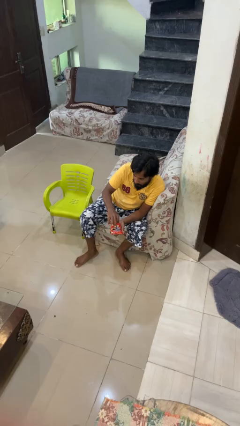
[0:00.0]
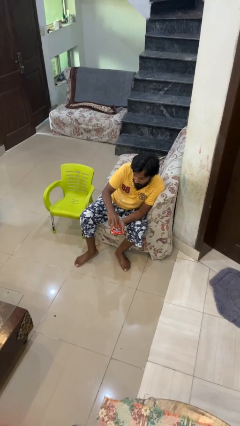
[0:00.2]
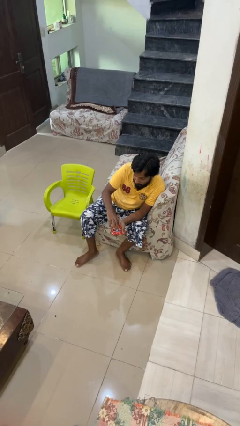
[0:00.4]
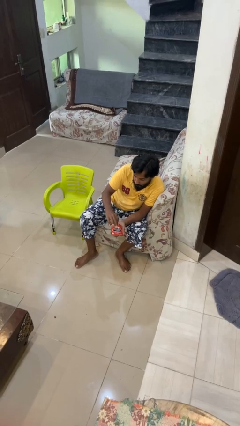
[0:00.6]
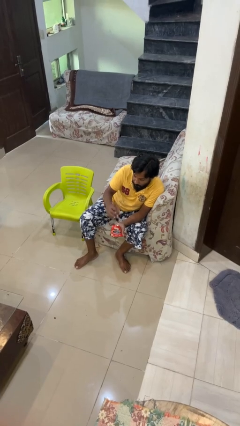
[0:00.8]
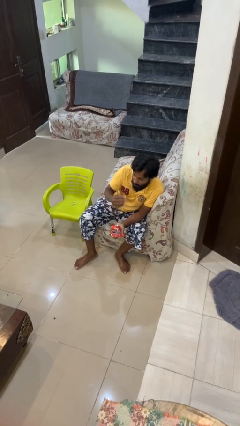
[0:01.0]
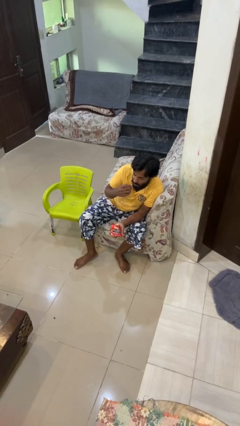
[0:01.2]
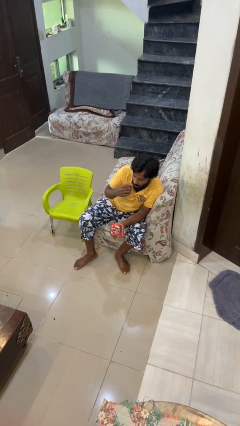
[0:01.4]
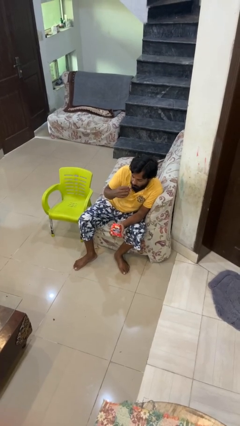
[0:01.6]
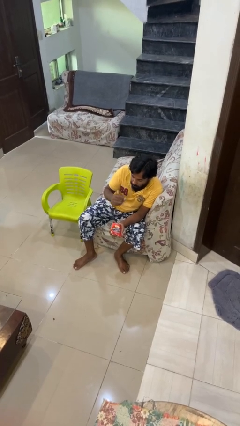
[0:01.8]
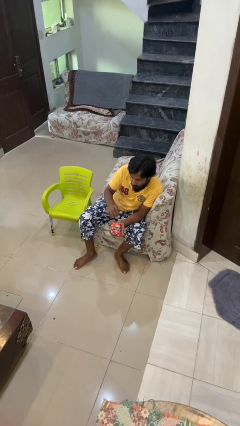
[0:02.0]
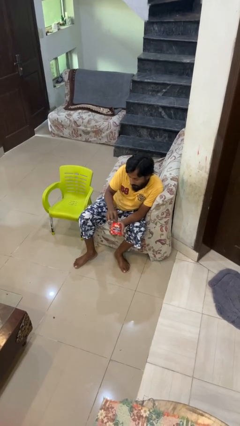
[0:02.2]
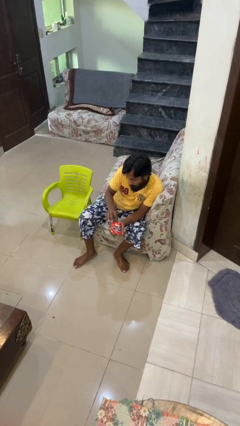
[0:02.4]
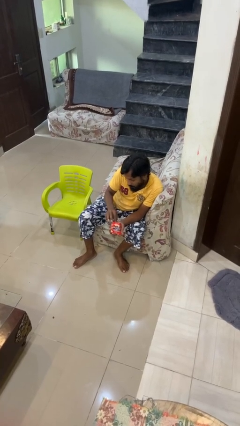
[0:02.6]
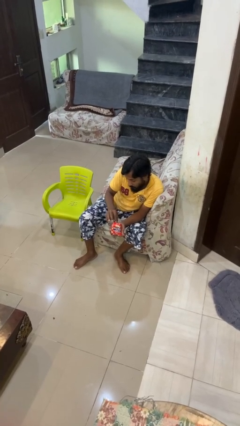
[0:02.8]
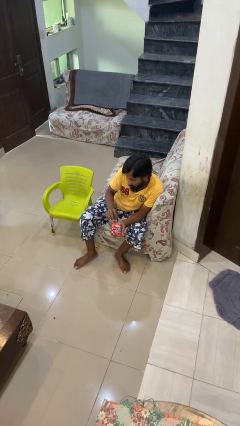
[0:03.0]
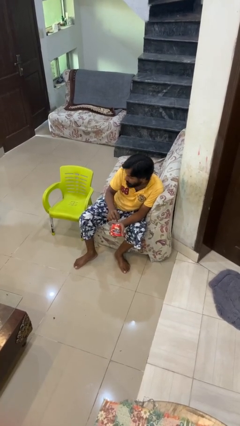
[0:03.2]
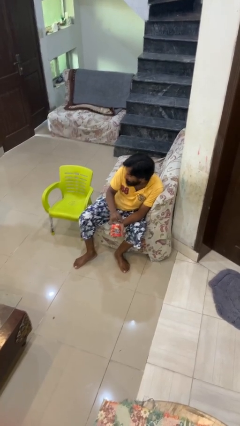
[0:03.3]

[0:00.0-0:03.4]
person eats snack from bag

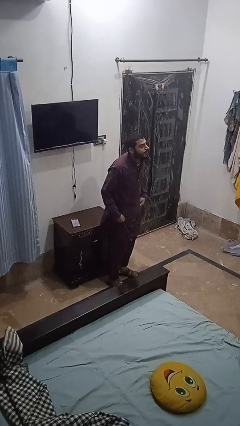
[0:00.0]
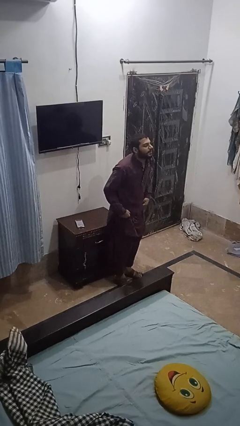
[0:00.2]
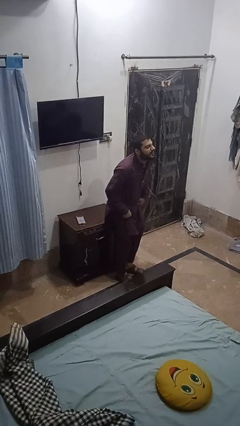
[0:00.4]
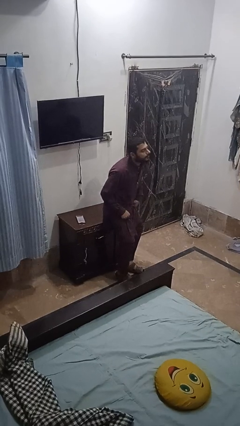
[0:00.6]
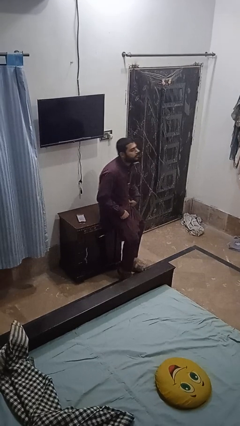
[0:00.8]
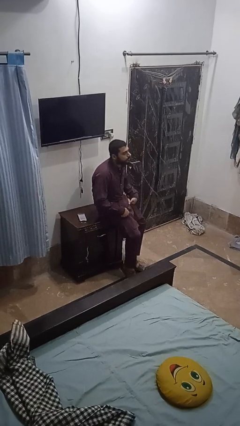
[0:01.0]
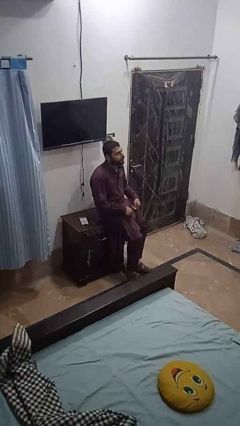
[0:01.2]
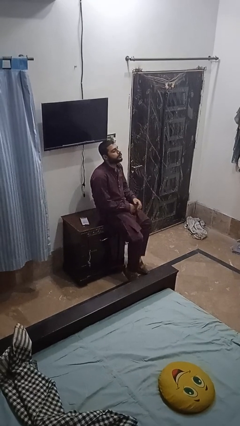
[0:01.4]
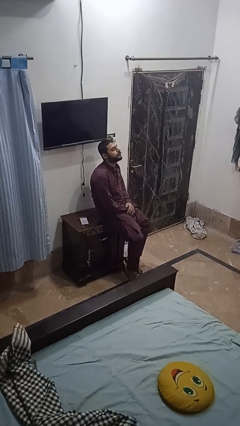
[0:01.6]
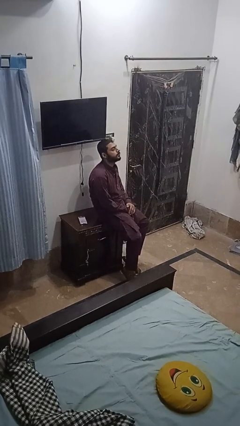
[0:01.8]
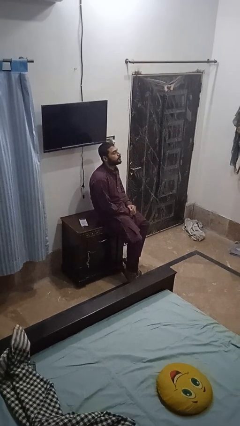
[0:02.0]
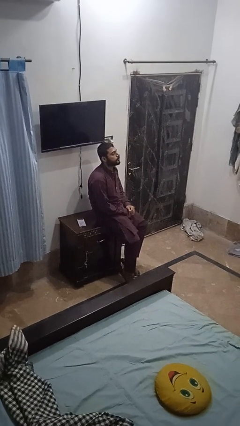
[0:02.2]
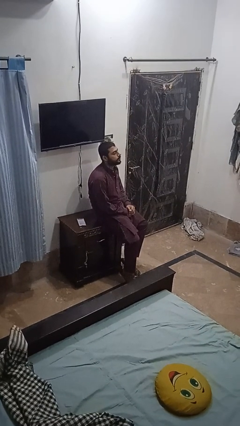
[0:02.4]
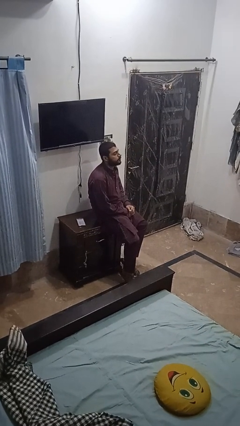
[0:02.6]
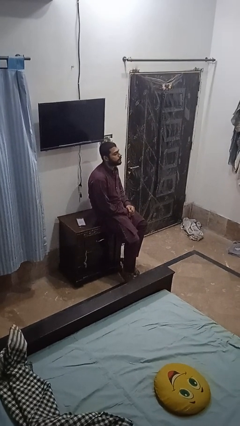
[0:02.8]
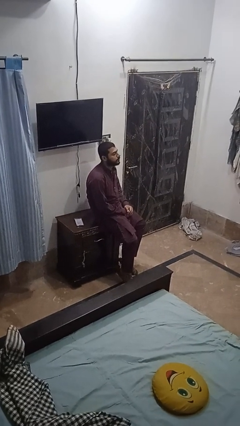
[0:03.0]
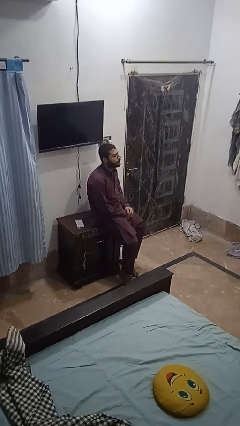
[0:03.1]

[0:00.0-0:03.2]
person sits down

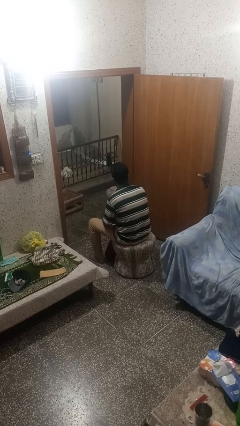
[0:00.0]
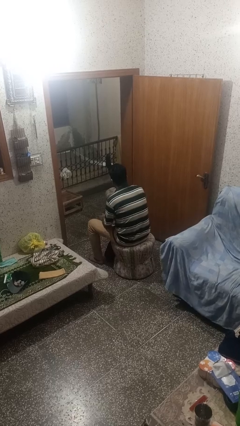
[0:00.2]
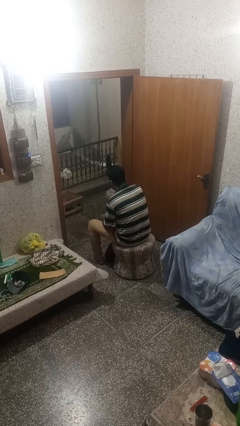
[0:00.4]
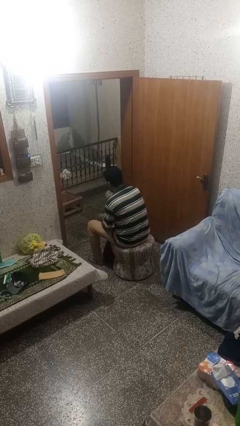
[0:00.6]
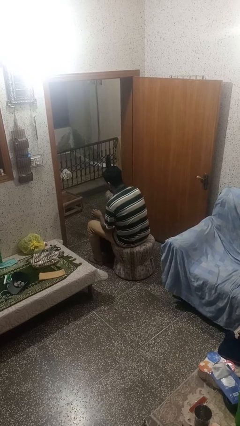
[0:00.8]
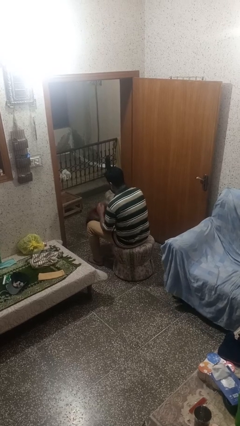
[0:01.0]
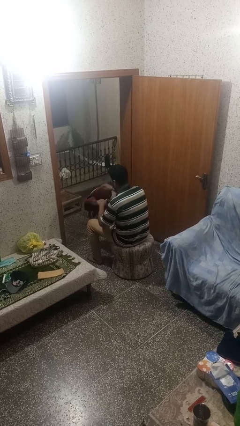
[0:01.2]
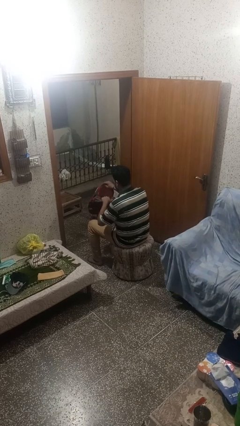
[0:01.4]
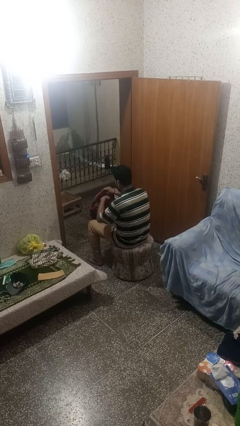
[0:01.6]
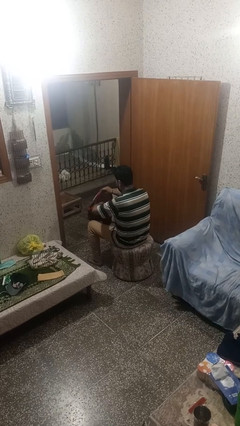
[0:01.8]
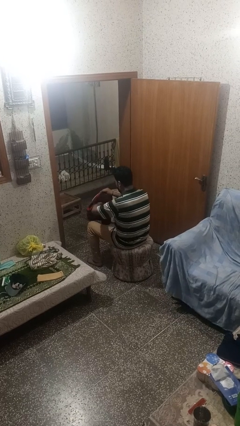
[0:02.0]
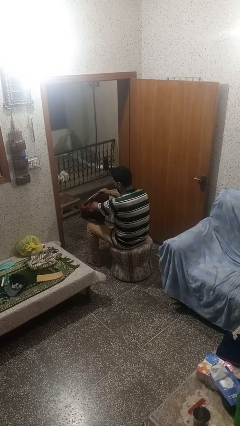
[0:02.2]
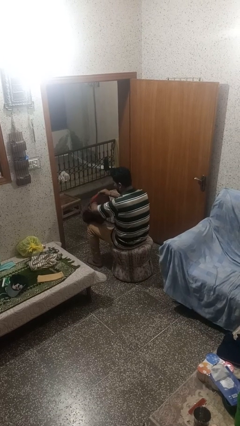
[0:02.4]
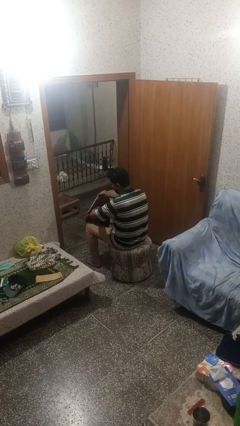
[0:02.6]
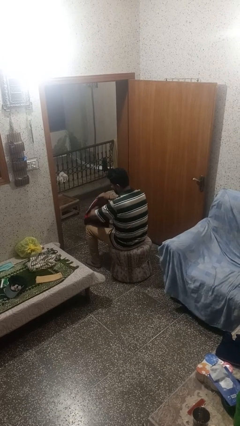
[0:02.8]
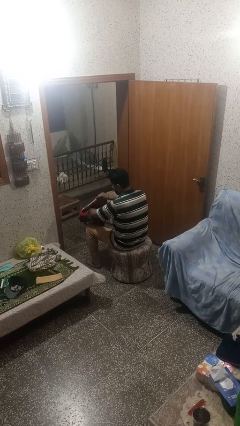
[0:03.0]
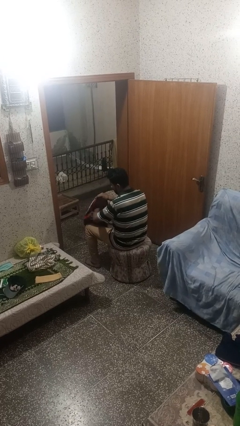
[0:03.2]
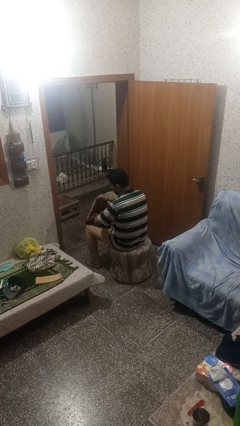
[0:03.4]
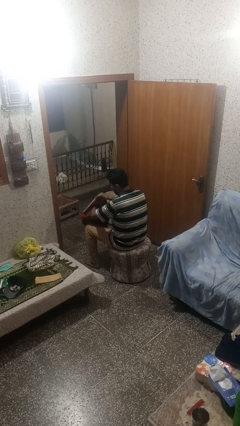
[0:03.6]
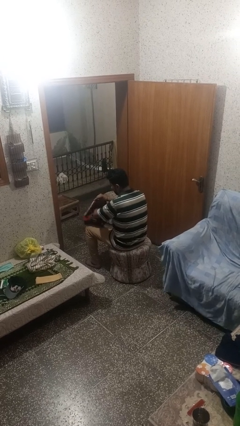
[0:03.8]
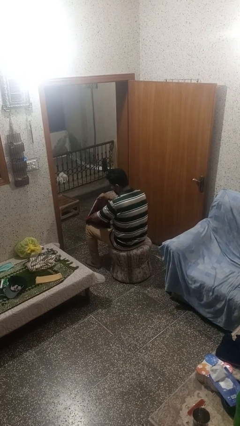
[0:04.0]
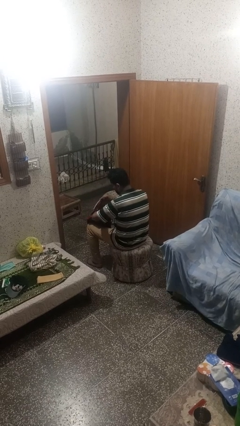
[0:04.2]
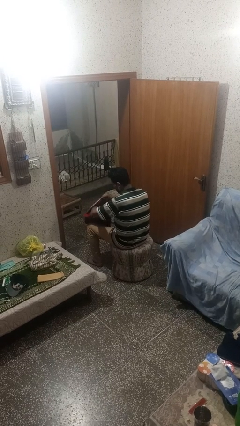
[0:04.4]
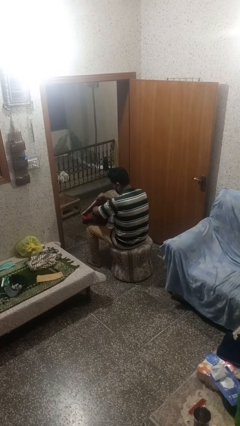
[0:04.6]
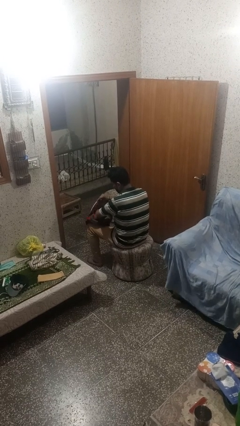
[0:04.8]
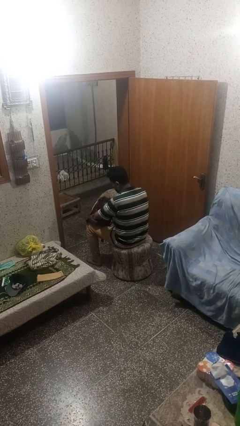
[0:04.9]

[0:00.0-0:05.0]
person searches in backpack

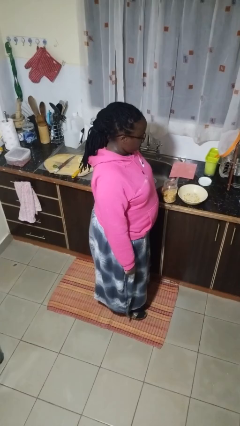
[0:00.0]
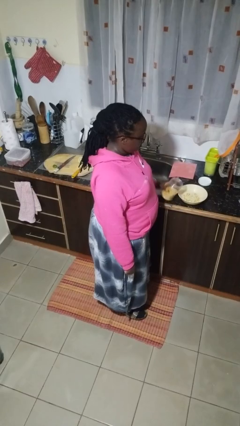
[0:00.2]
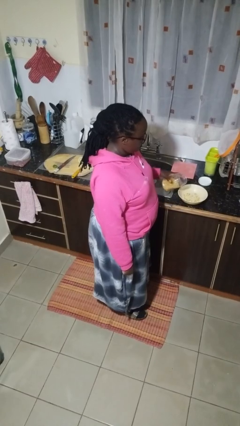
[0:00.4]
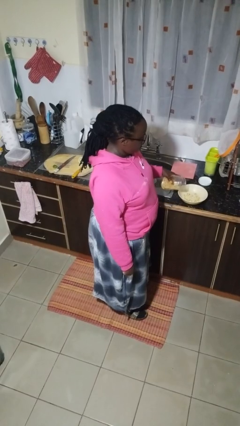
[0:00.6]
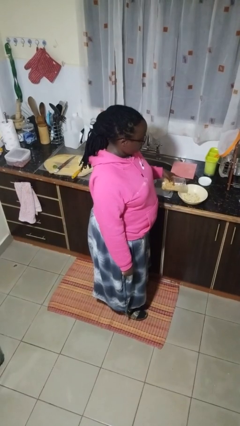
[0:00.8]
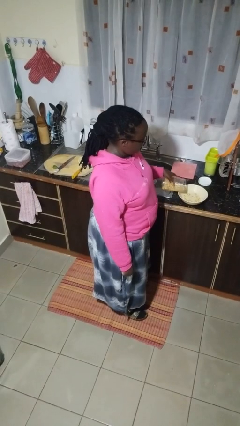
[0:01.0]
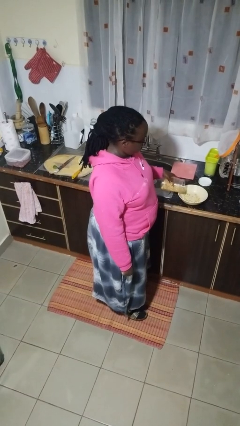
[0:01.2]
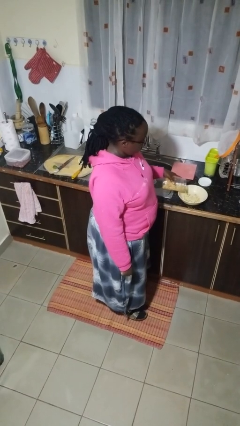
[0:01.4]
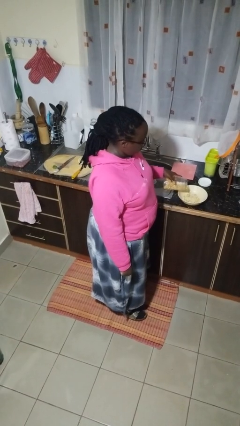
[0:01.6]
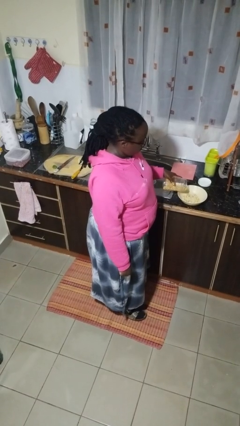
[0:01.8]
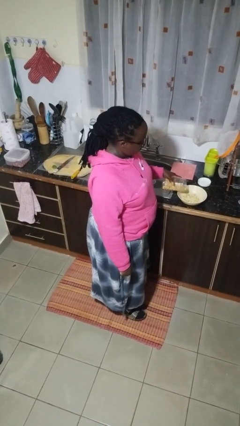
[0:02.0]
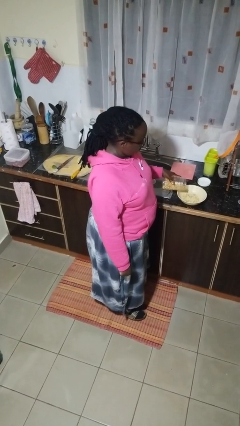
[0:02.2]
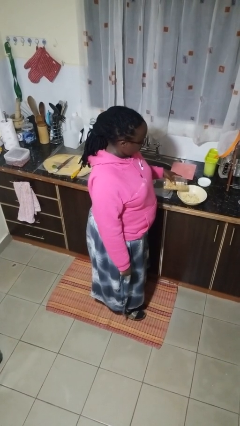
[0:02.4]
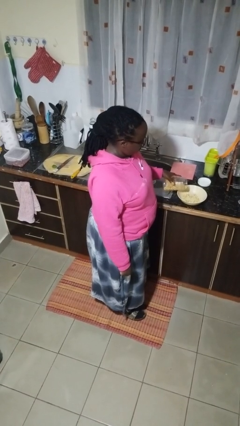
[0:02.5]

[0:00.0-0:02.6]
person pours into bowl

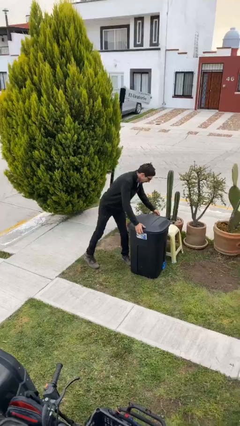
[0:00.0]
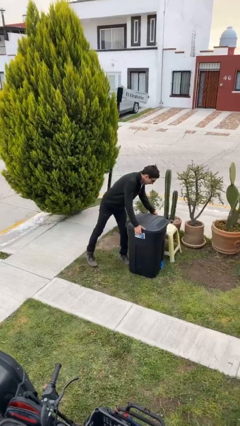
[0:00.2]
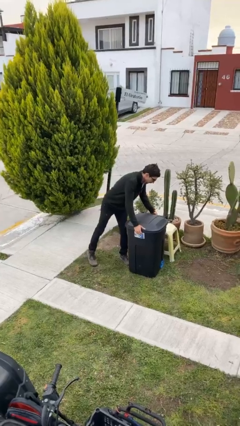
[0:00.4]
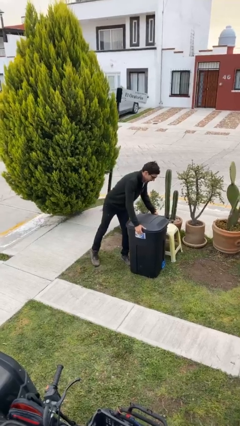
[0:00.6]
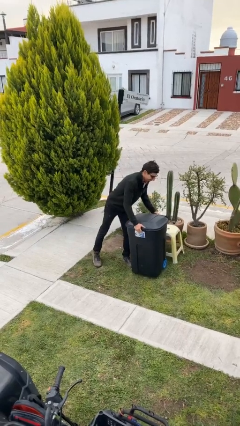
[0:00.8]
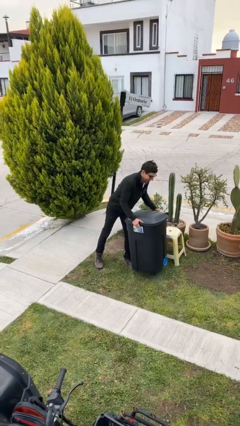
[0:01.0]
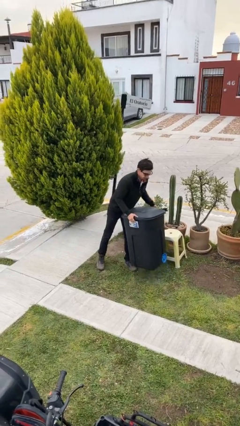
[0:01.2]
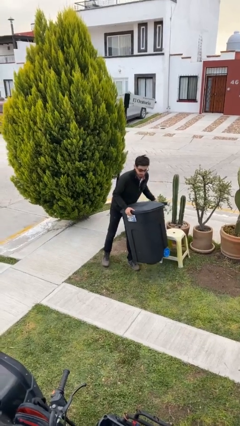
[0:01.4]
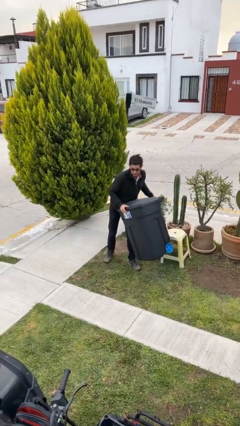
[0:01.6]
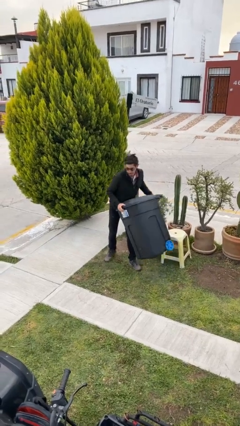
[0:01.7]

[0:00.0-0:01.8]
person picks up object from floor

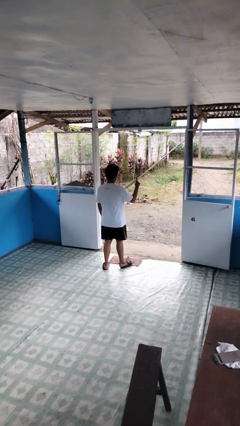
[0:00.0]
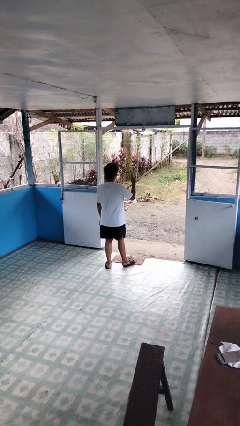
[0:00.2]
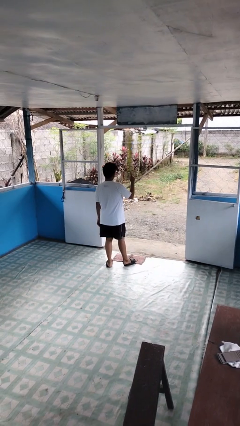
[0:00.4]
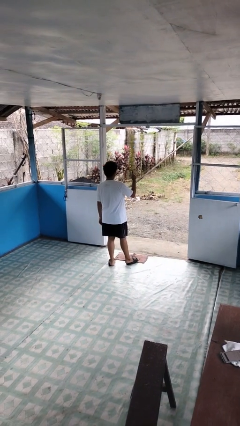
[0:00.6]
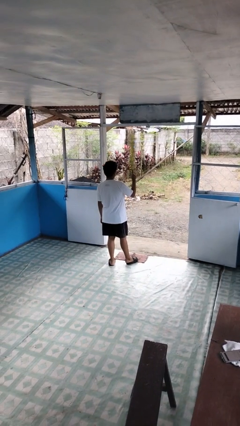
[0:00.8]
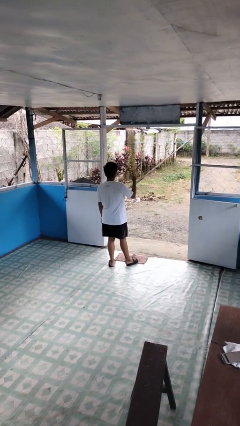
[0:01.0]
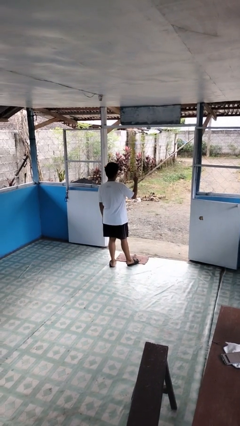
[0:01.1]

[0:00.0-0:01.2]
person gestures number one

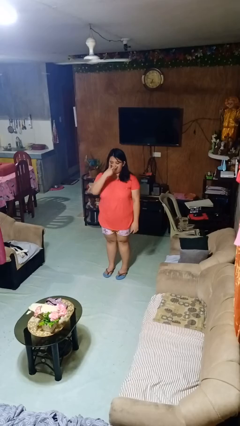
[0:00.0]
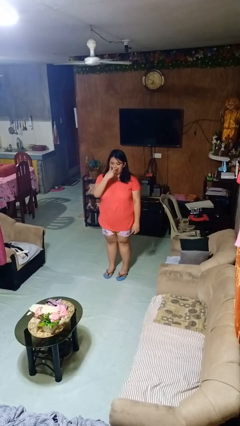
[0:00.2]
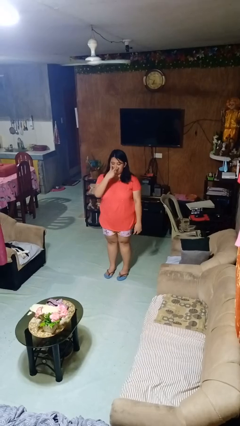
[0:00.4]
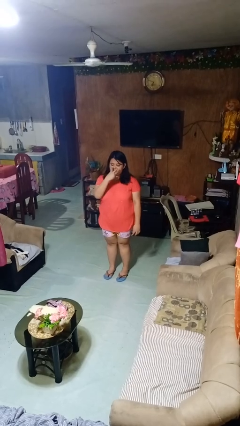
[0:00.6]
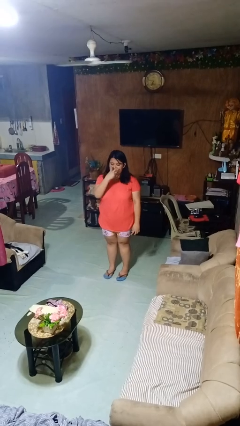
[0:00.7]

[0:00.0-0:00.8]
person gestures watch closely
